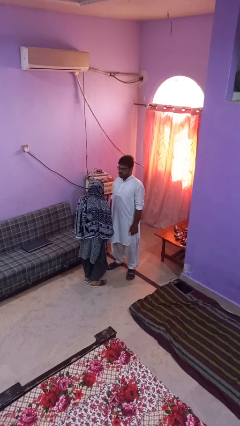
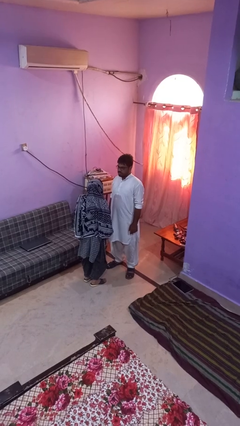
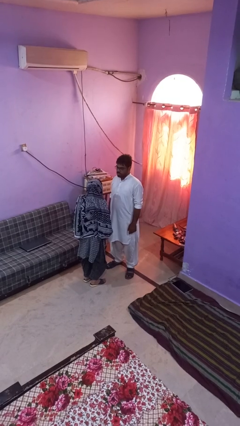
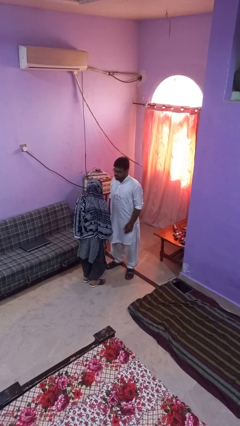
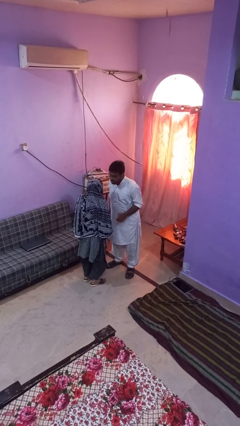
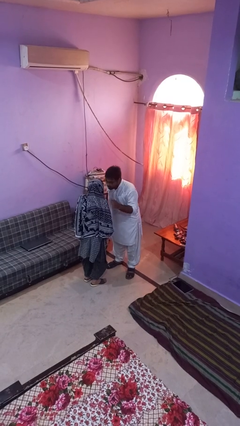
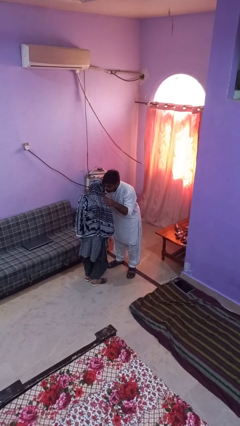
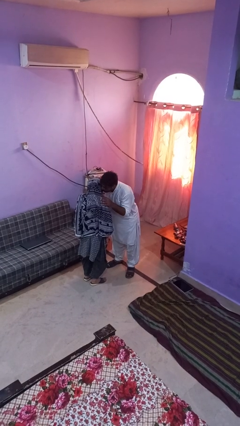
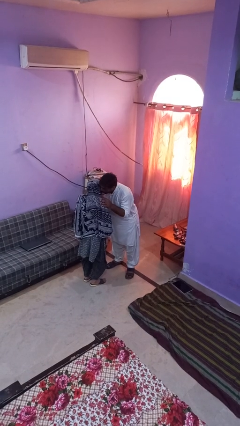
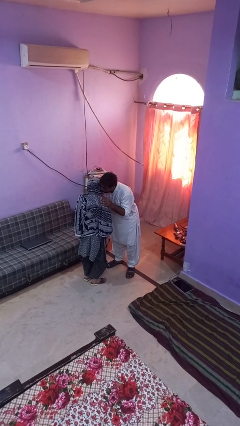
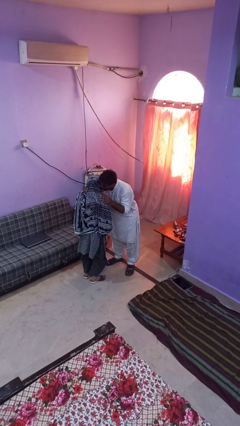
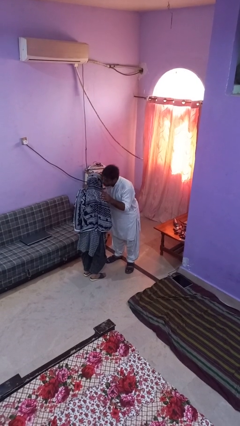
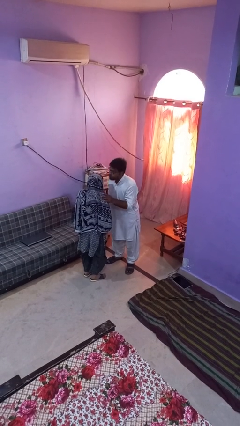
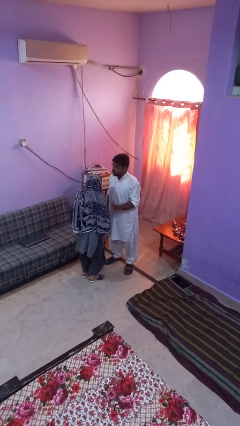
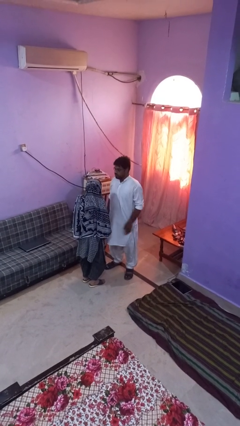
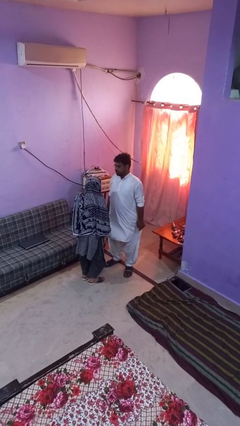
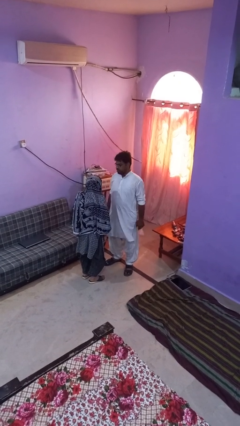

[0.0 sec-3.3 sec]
person kisses cheek of person

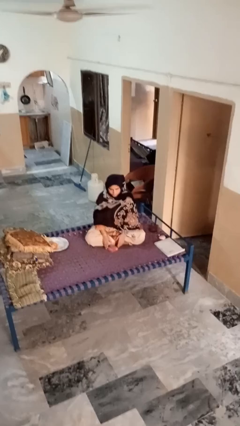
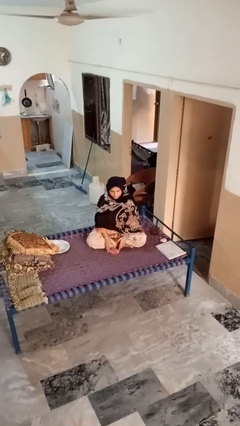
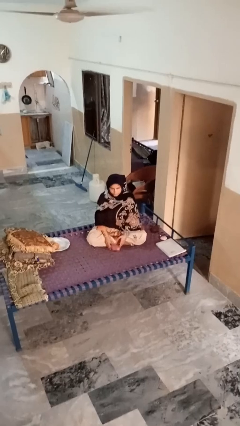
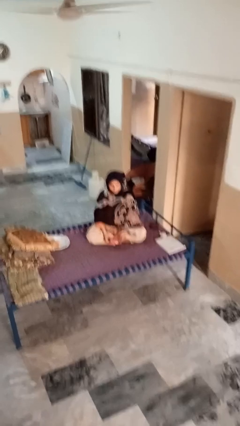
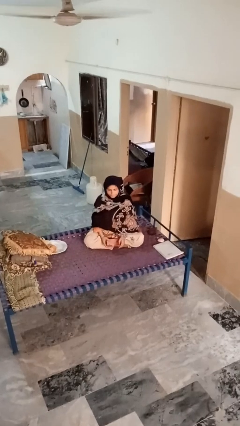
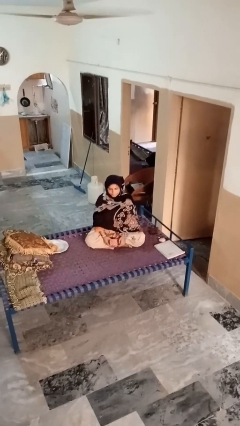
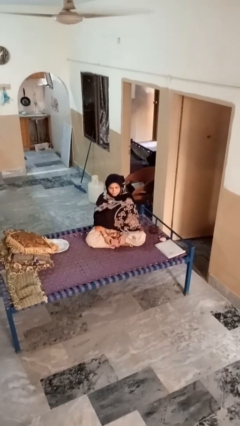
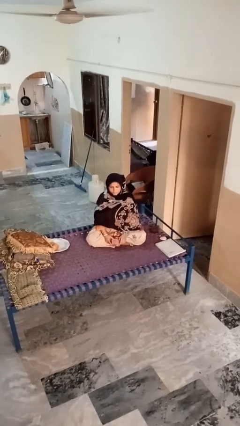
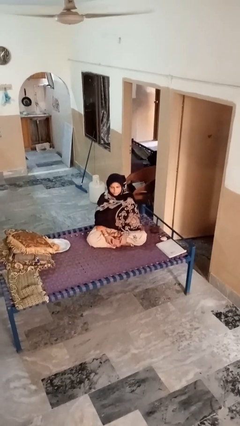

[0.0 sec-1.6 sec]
person picks up object from floor

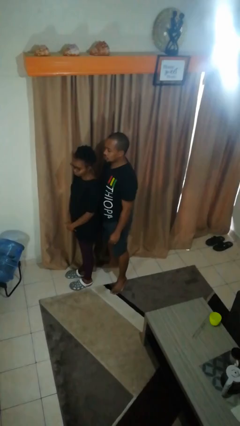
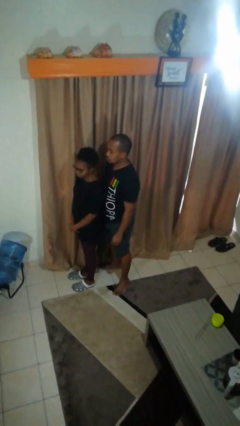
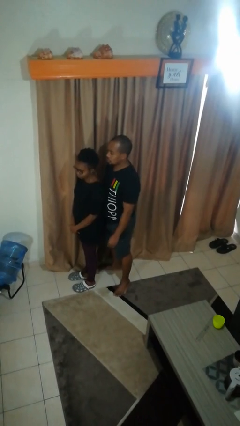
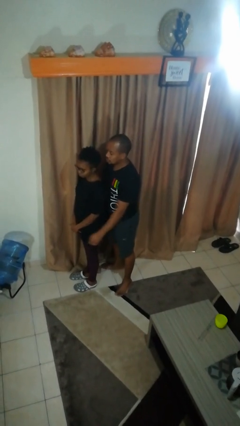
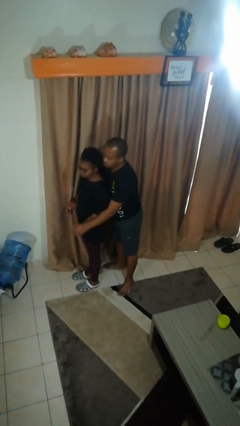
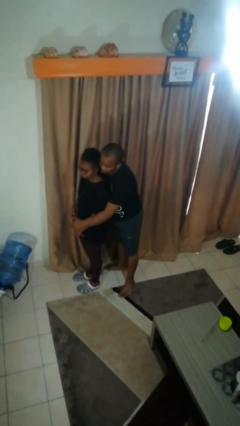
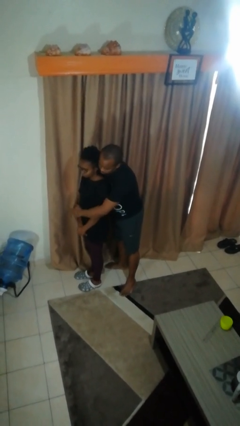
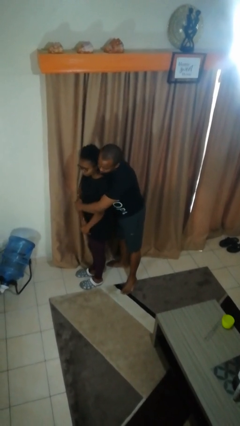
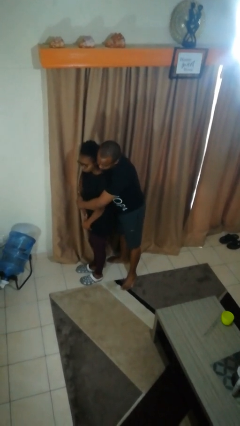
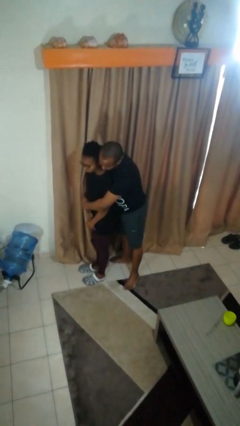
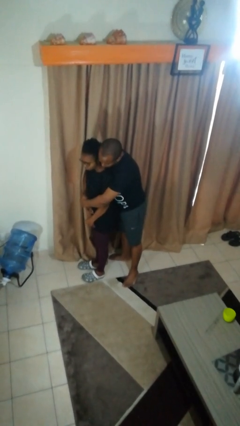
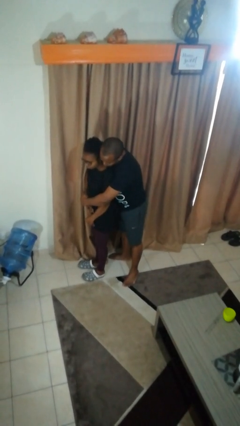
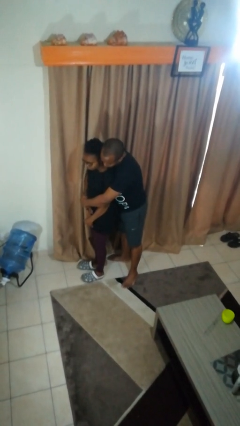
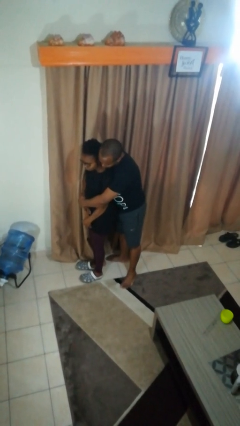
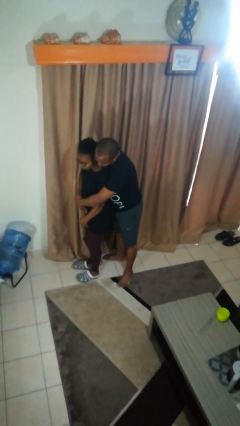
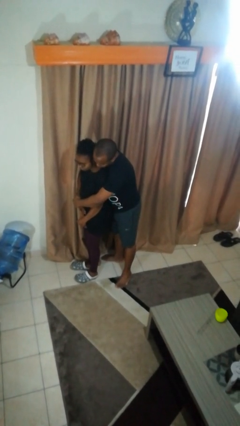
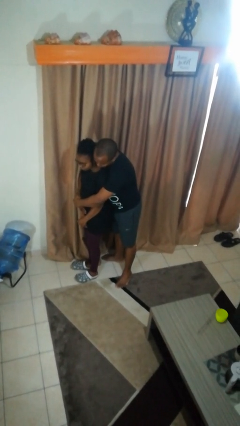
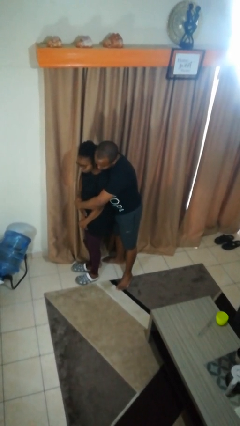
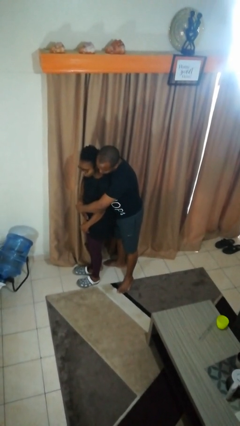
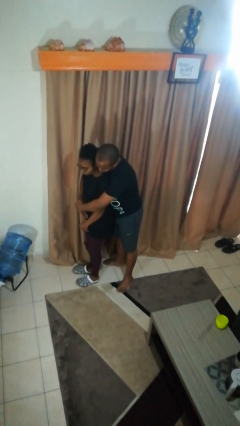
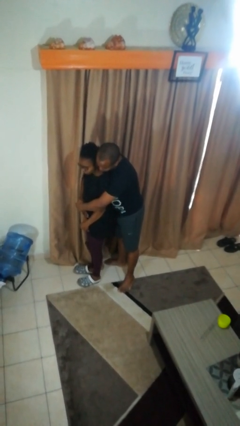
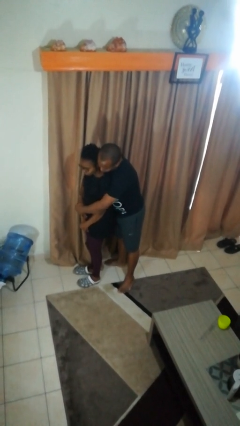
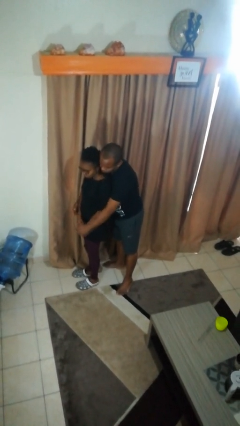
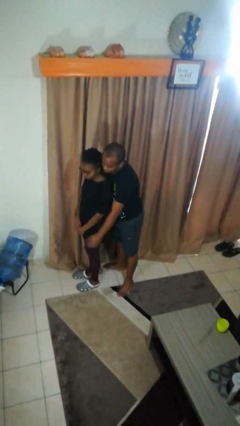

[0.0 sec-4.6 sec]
person hugs person from behind

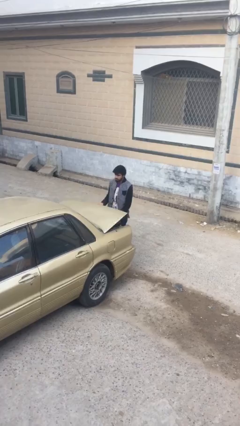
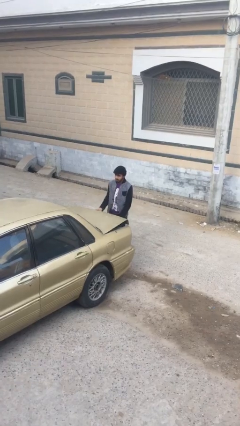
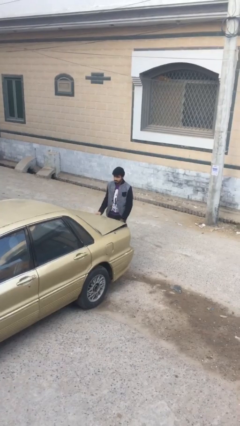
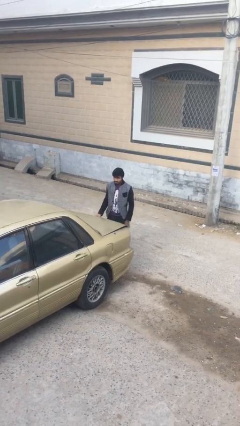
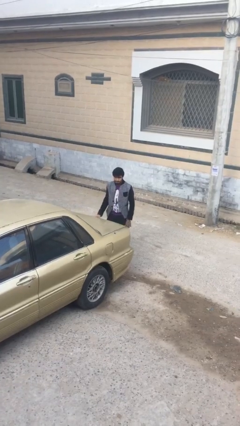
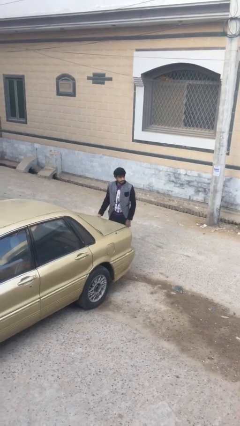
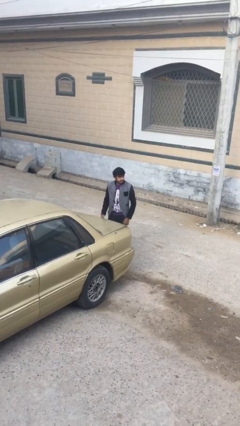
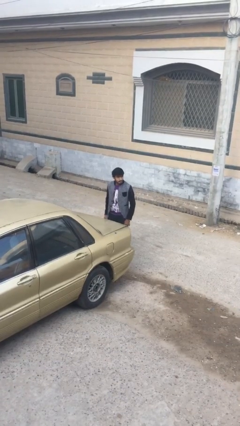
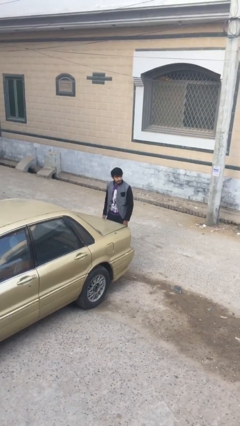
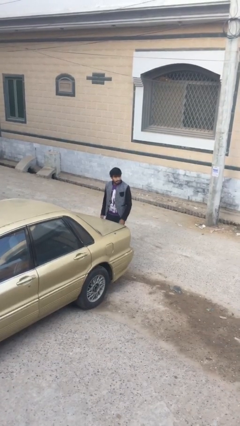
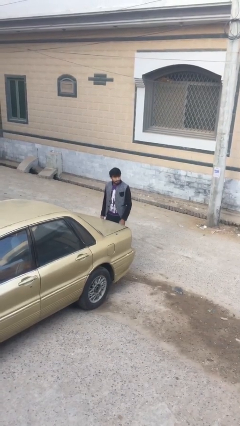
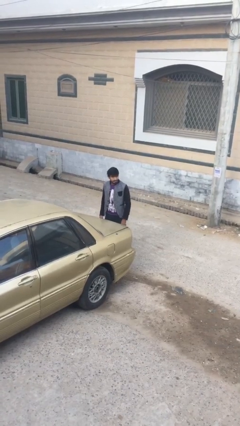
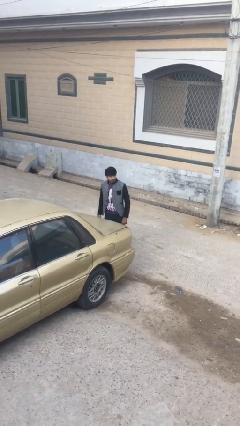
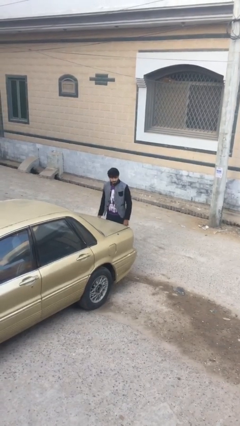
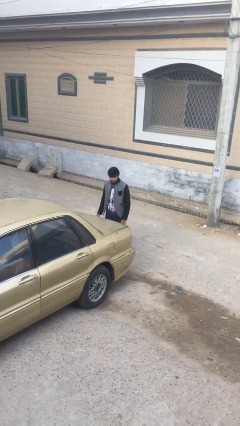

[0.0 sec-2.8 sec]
person closes car trunk

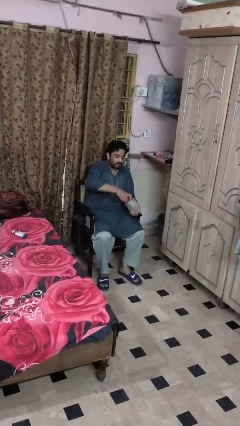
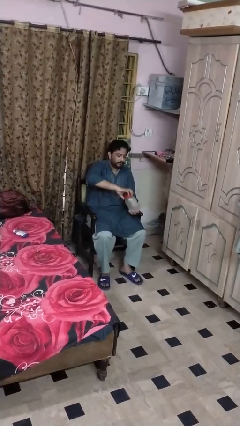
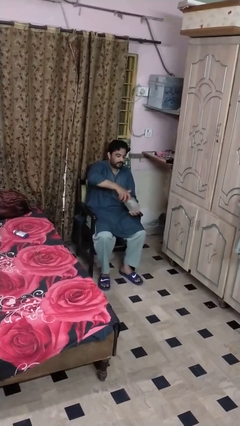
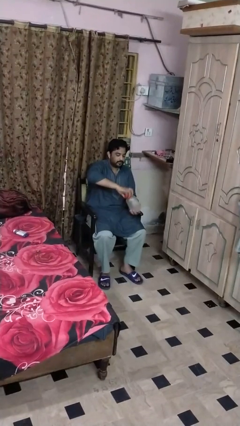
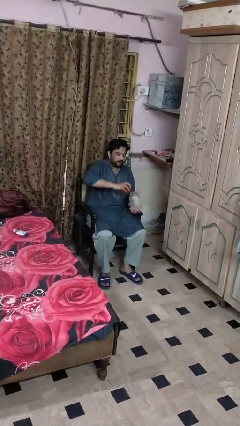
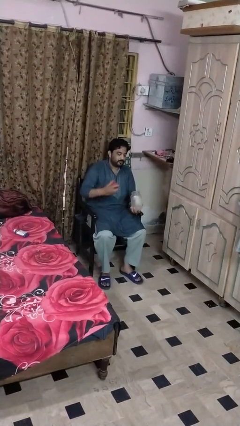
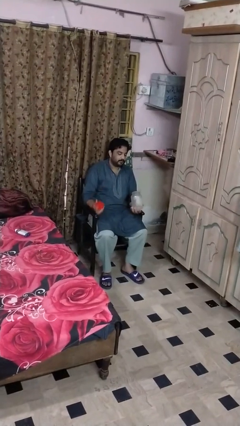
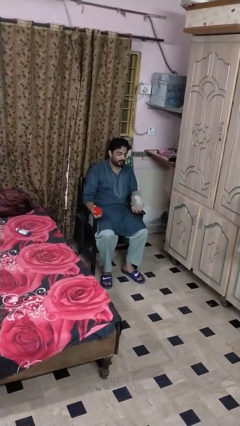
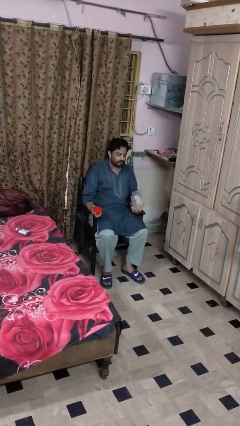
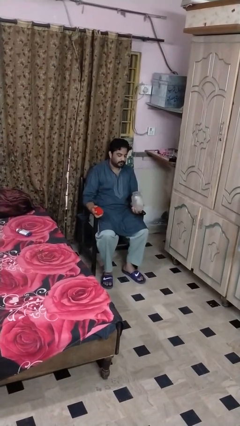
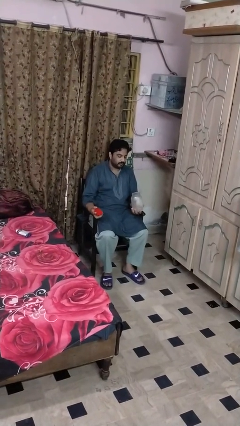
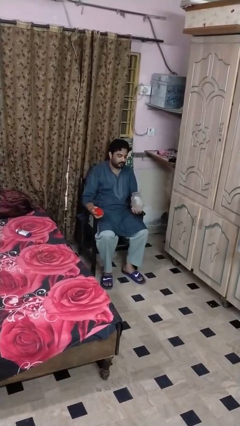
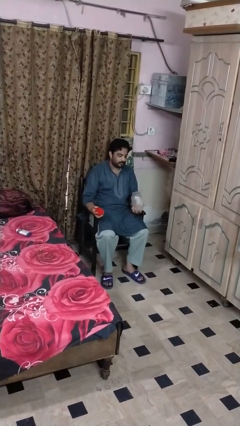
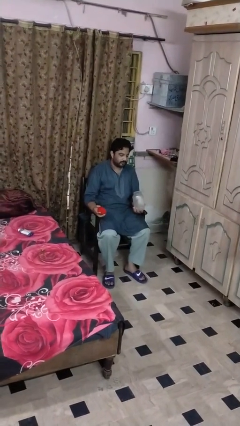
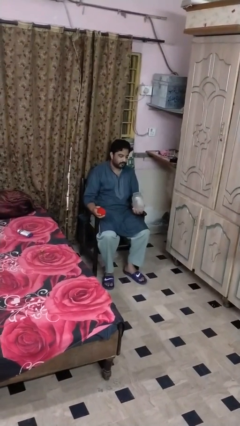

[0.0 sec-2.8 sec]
person opens jar

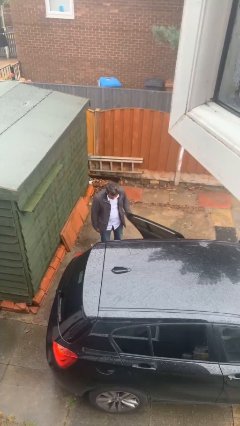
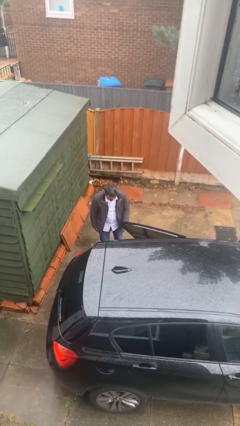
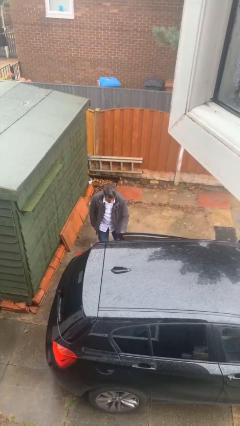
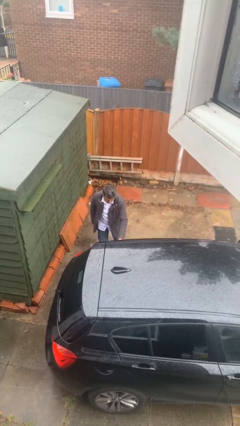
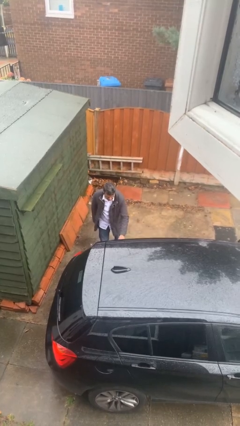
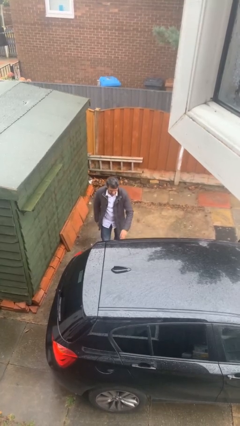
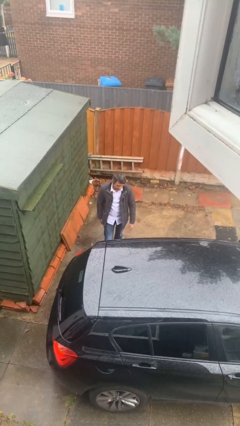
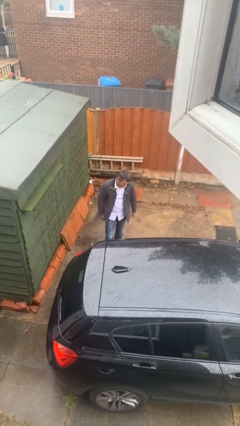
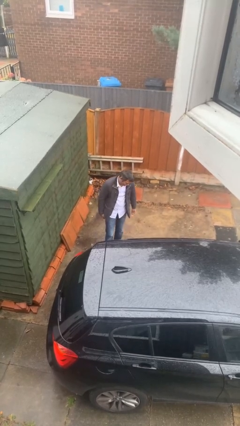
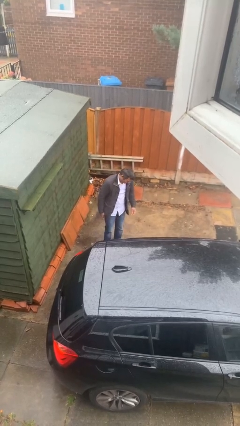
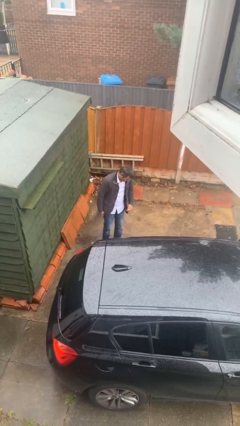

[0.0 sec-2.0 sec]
person closes car door
